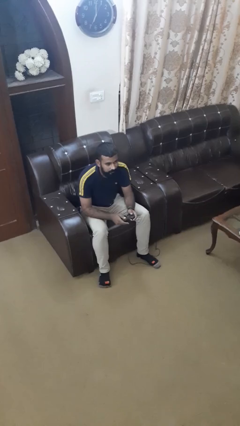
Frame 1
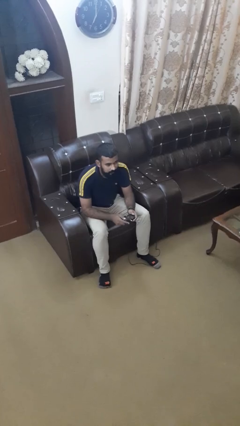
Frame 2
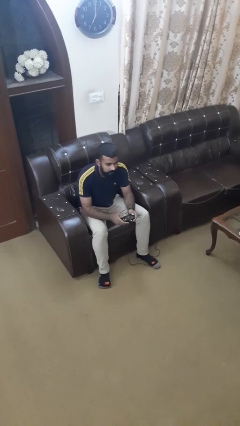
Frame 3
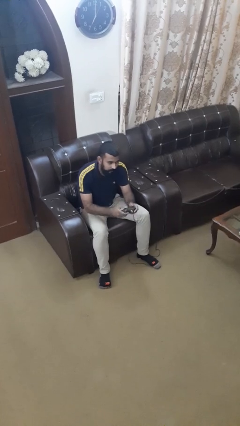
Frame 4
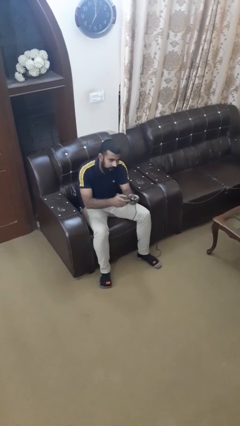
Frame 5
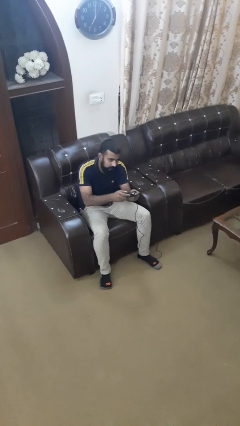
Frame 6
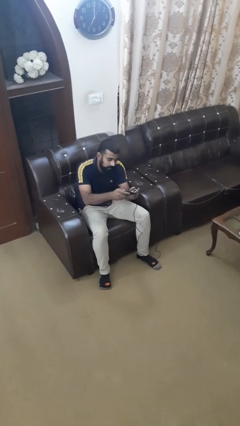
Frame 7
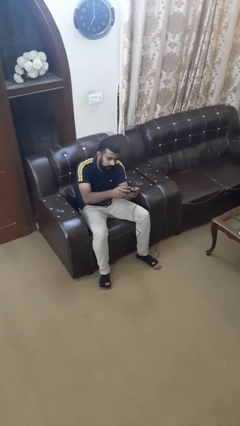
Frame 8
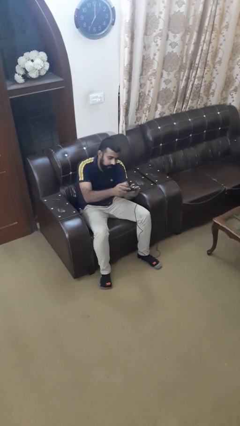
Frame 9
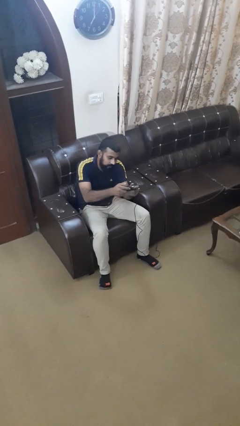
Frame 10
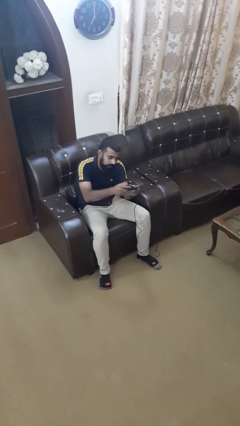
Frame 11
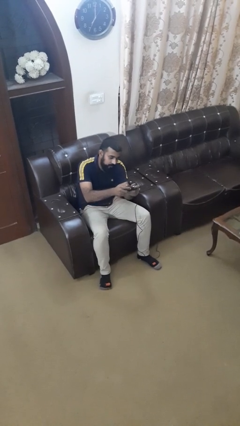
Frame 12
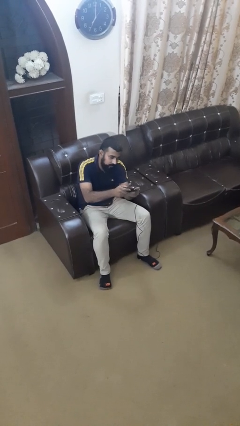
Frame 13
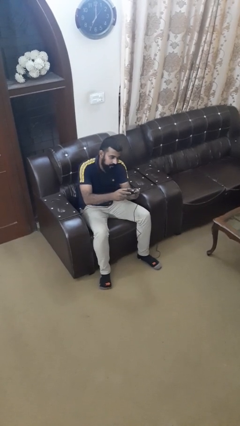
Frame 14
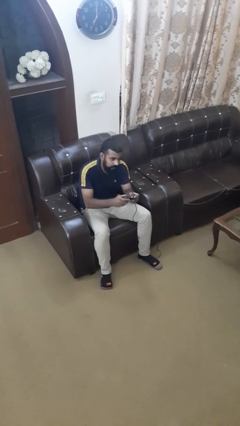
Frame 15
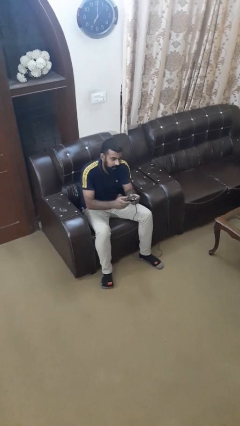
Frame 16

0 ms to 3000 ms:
person interacts with handheld game

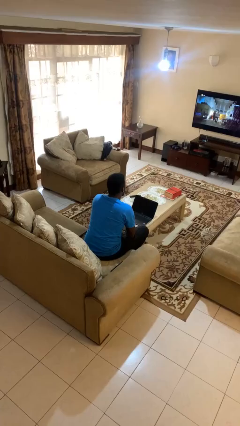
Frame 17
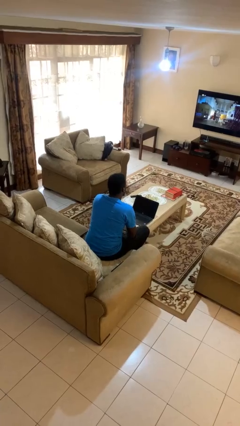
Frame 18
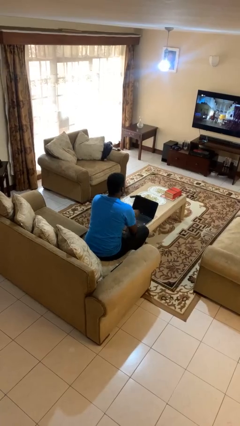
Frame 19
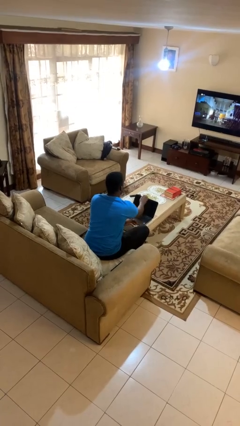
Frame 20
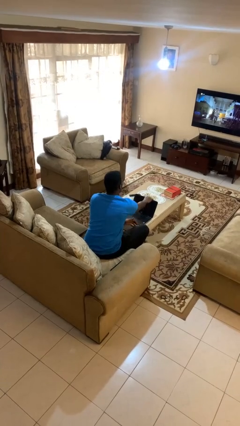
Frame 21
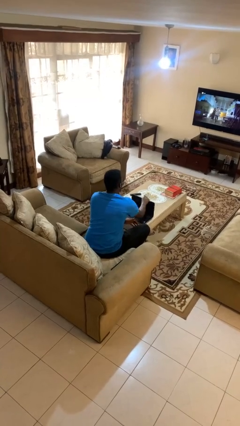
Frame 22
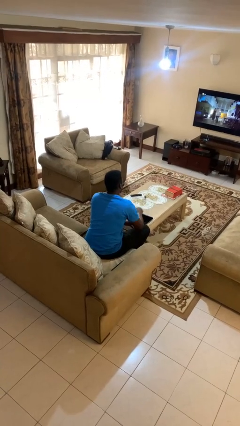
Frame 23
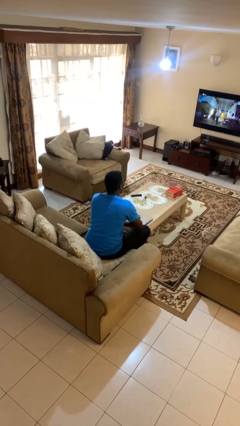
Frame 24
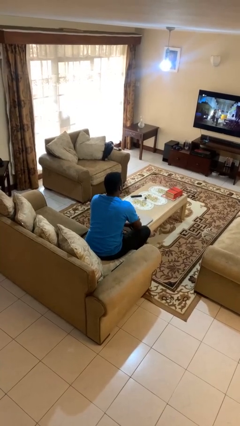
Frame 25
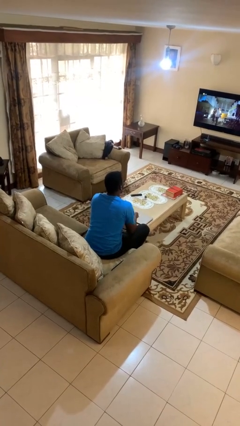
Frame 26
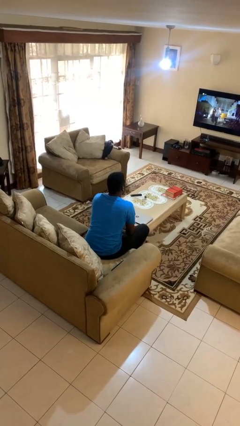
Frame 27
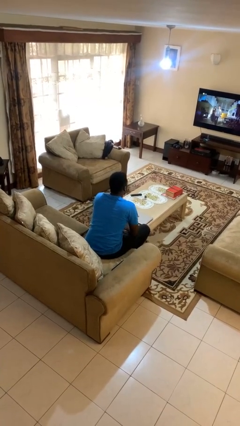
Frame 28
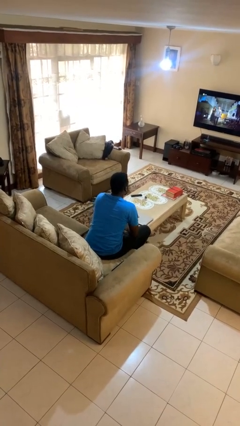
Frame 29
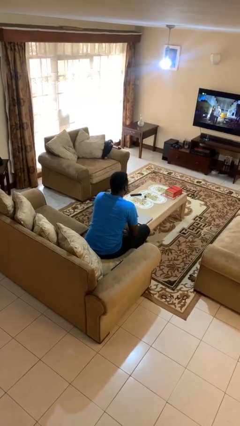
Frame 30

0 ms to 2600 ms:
person closes laptop

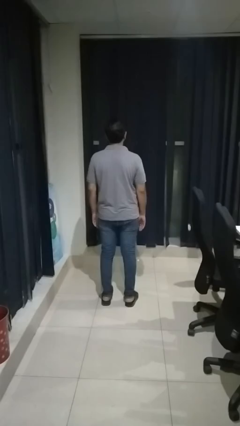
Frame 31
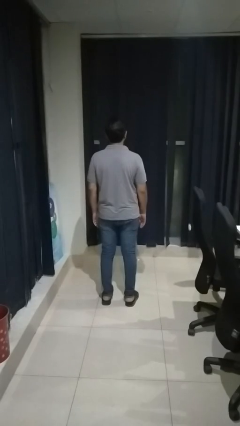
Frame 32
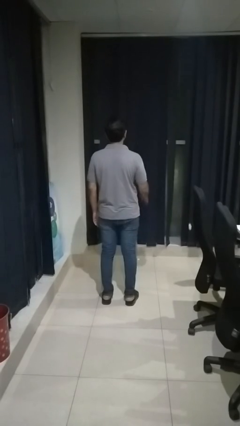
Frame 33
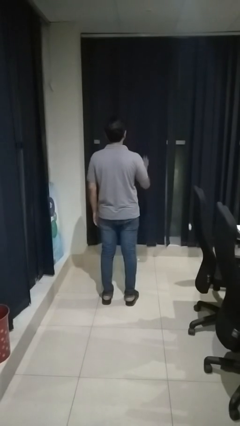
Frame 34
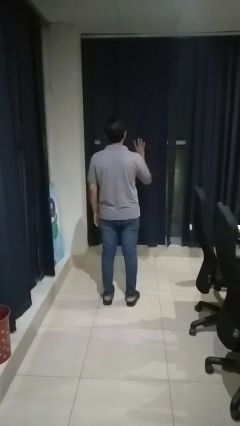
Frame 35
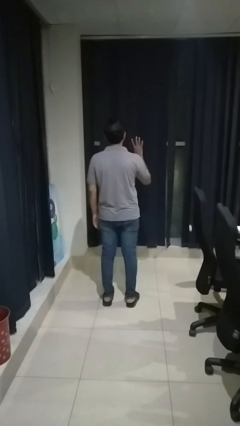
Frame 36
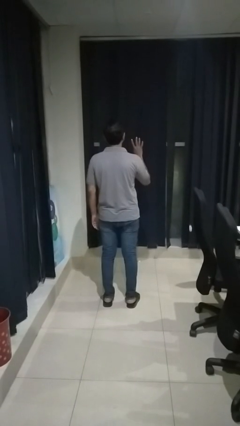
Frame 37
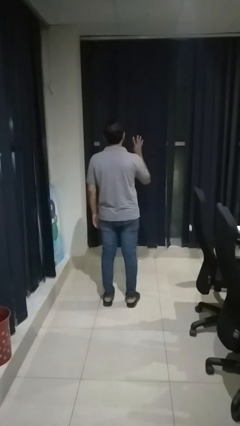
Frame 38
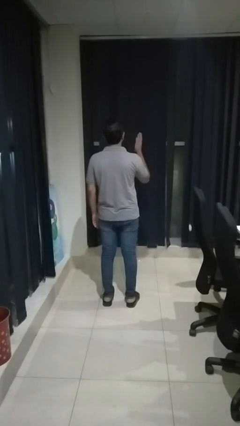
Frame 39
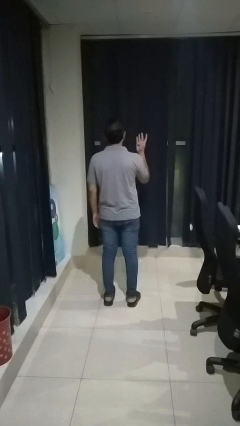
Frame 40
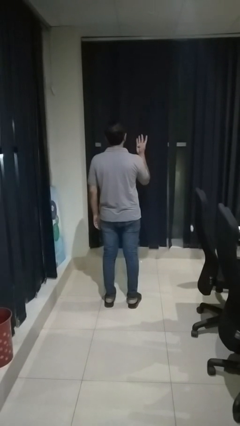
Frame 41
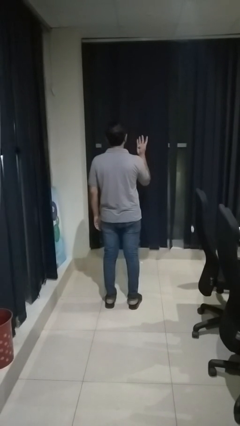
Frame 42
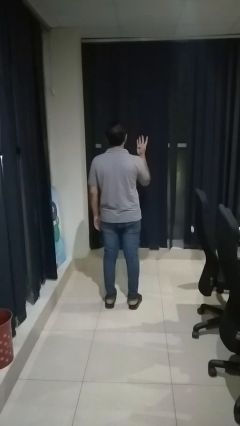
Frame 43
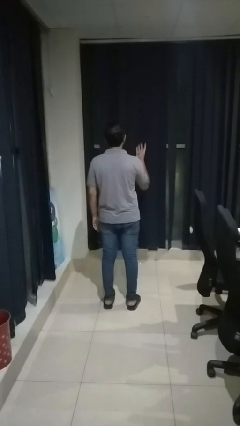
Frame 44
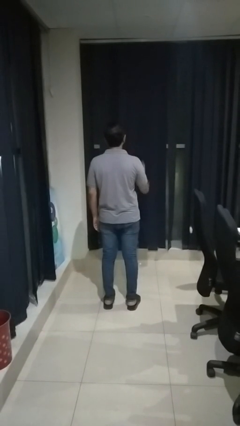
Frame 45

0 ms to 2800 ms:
person gestures number four

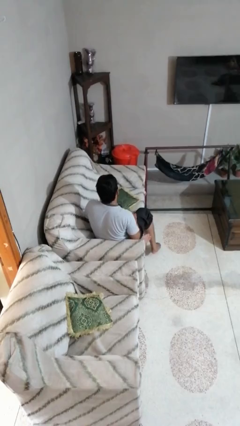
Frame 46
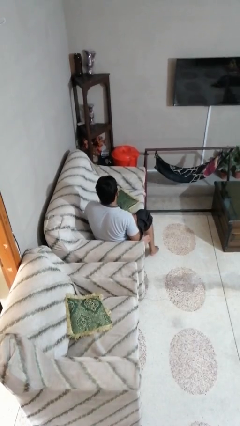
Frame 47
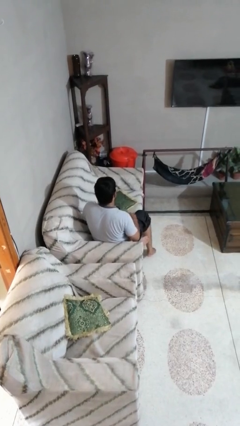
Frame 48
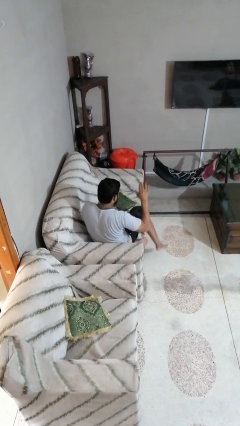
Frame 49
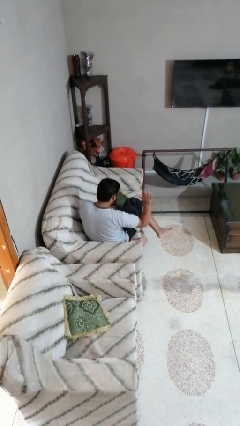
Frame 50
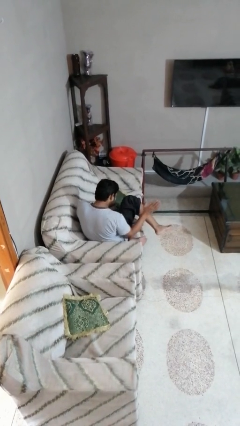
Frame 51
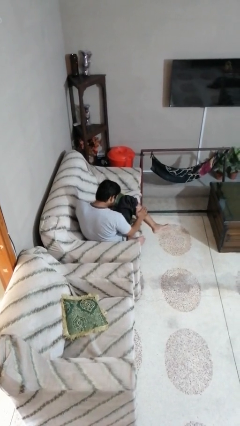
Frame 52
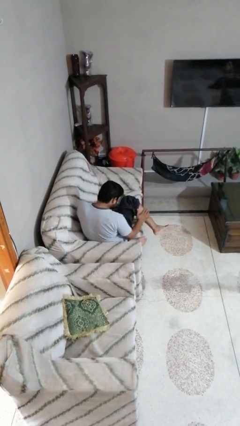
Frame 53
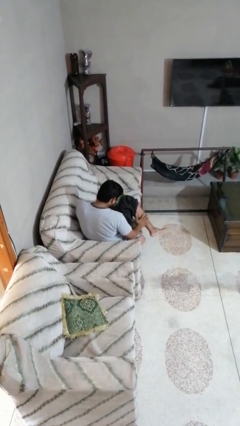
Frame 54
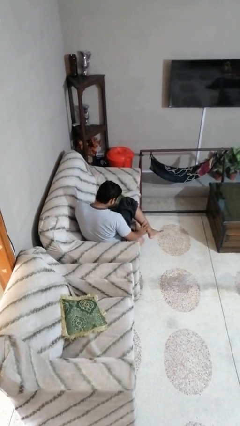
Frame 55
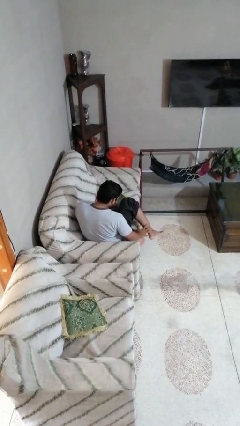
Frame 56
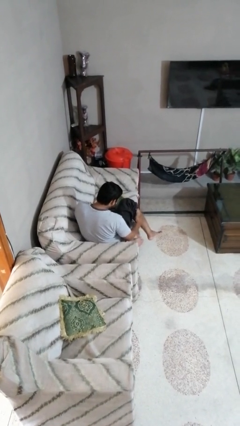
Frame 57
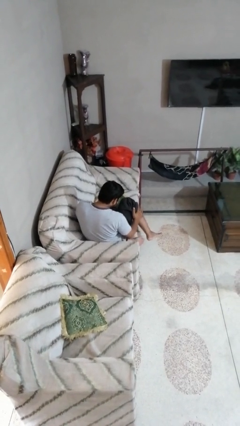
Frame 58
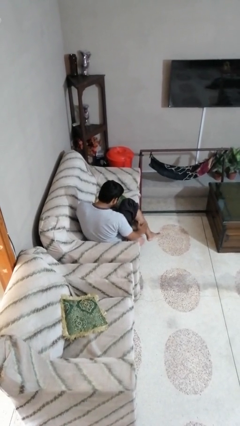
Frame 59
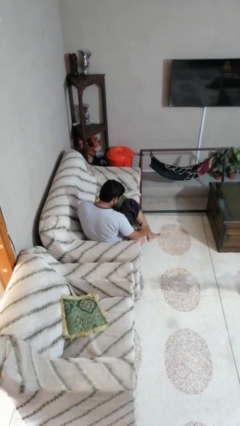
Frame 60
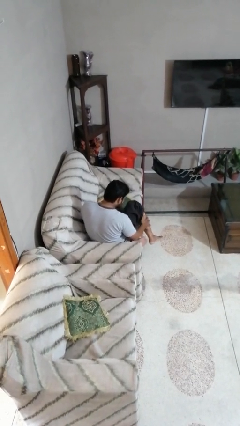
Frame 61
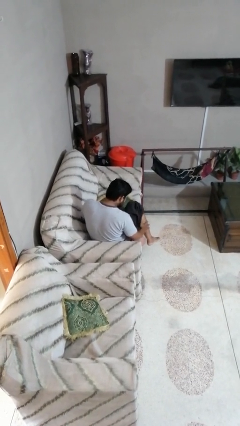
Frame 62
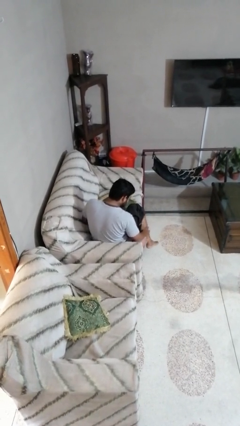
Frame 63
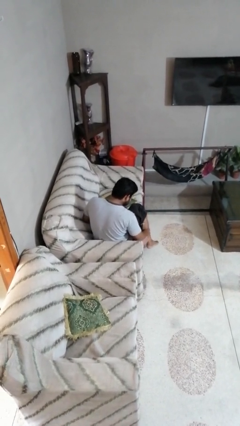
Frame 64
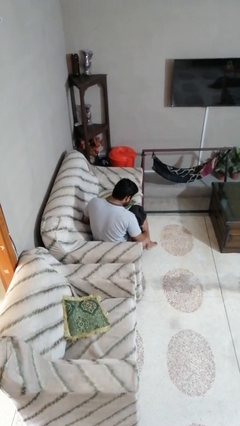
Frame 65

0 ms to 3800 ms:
person swats bug

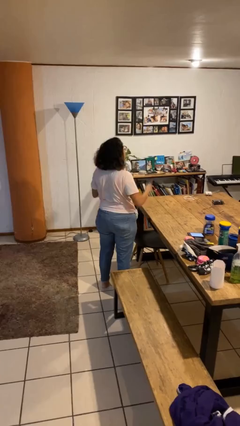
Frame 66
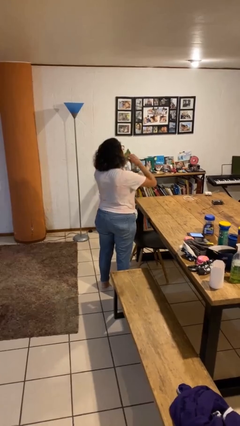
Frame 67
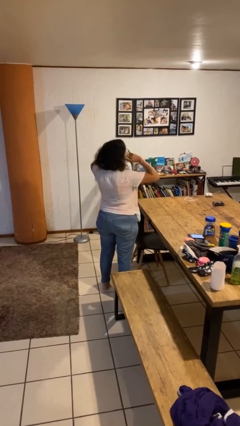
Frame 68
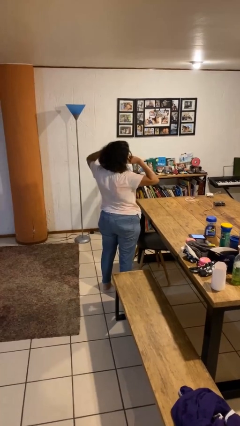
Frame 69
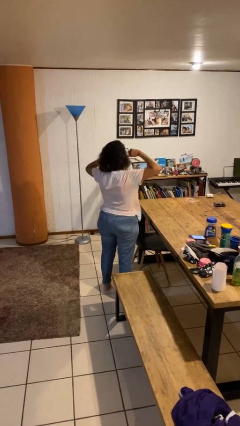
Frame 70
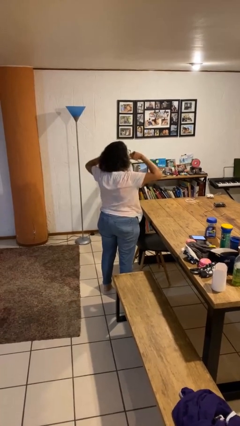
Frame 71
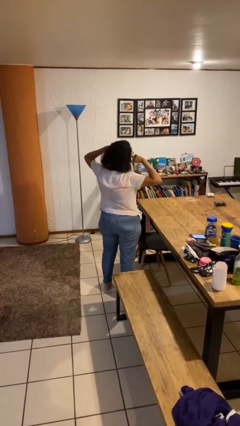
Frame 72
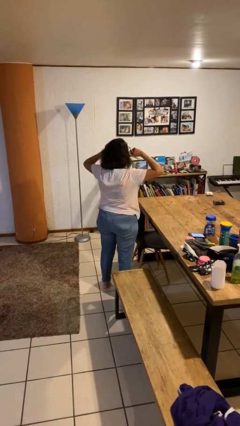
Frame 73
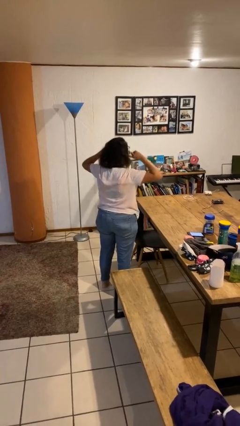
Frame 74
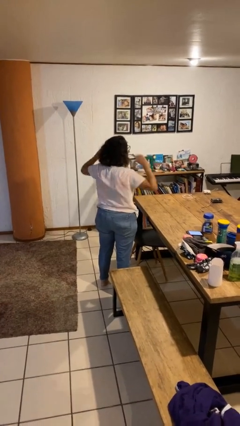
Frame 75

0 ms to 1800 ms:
person puts fingers in ear

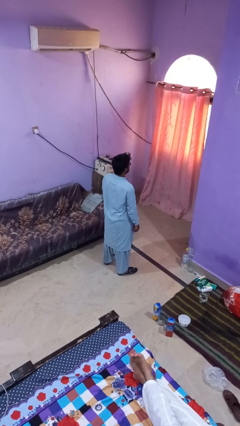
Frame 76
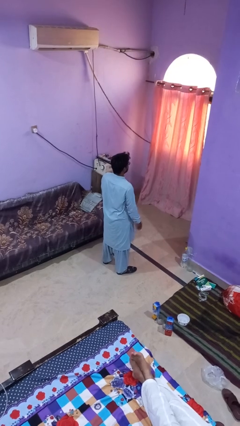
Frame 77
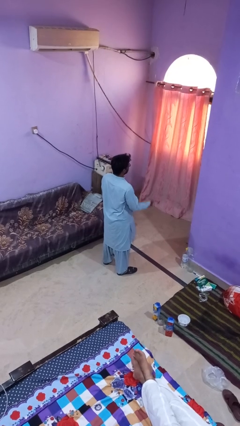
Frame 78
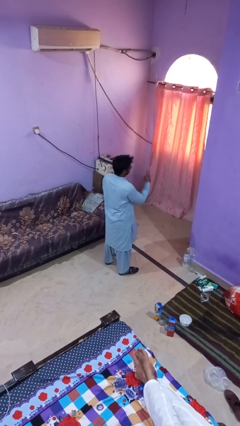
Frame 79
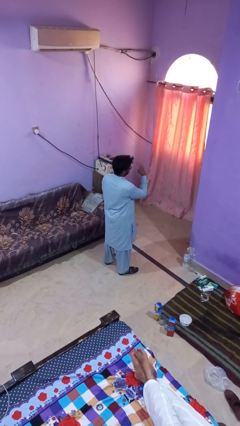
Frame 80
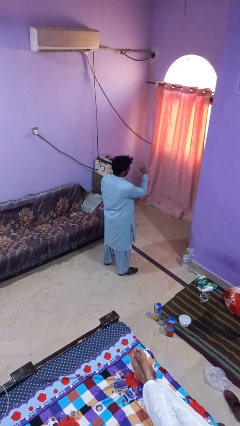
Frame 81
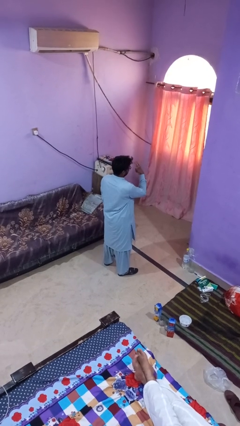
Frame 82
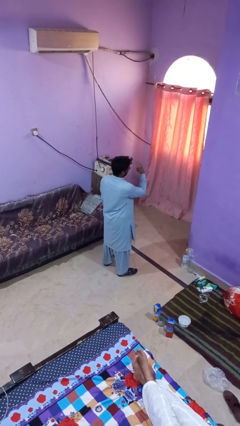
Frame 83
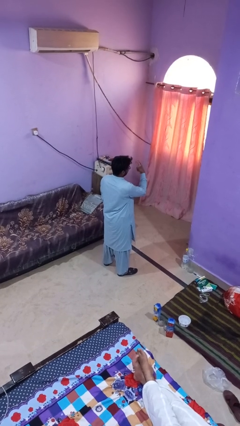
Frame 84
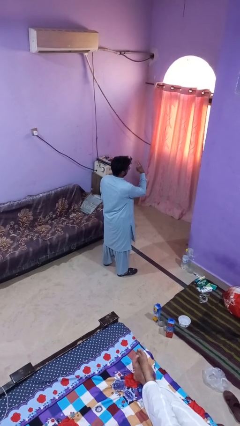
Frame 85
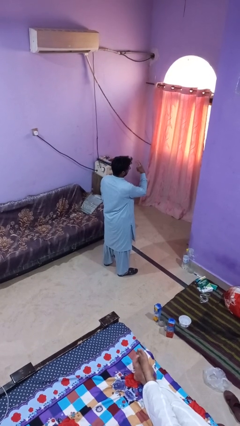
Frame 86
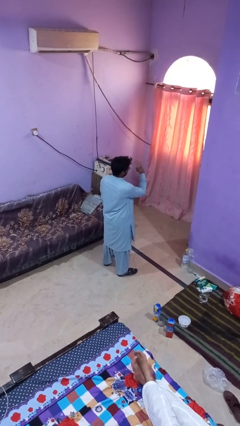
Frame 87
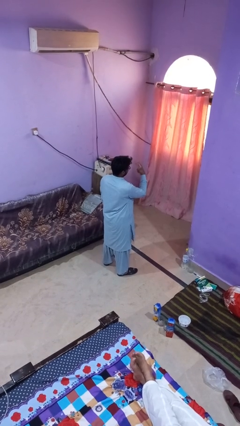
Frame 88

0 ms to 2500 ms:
person gestures peace

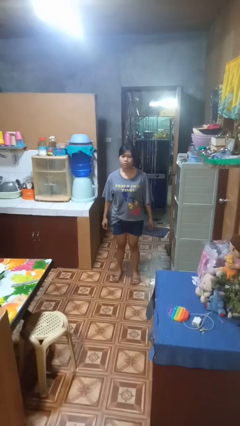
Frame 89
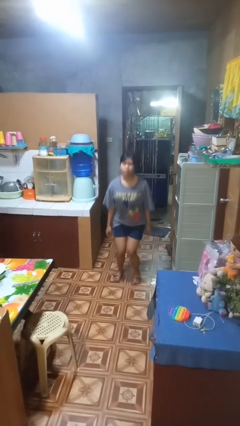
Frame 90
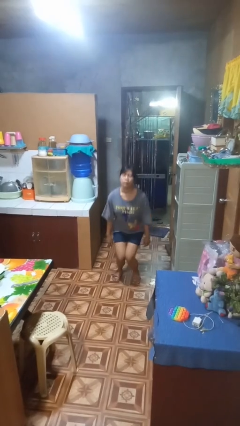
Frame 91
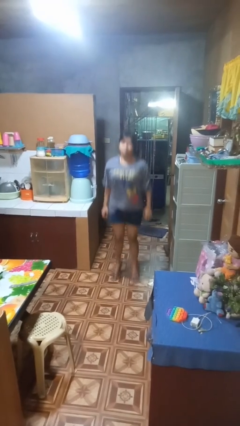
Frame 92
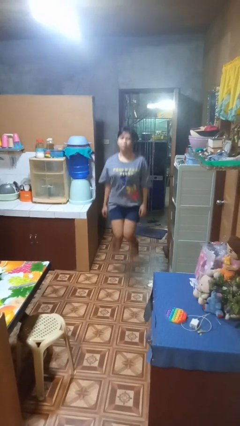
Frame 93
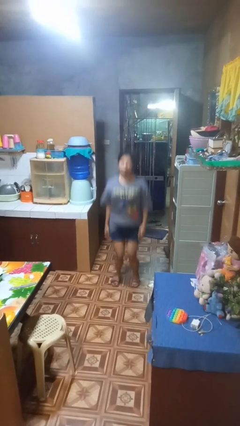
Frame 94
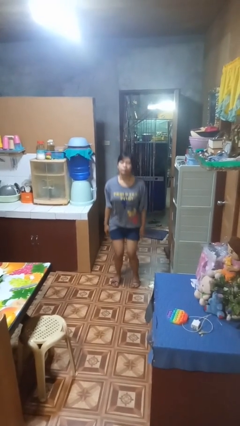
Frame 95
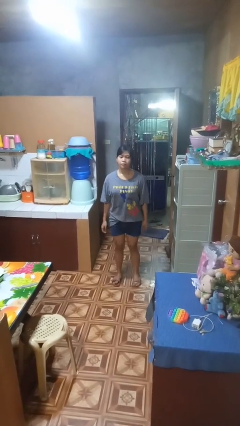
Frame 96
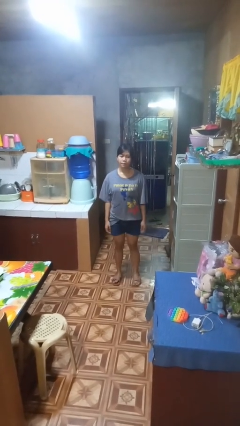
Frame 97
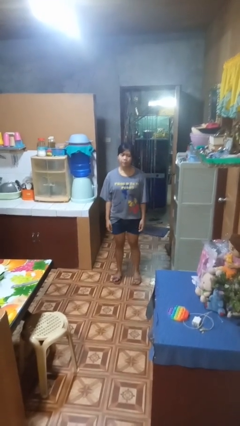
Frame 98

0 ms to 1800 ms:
person jumps
